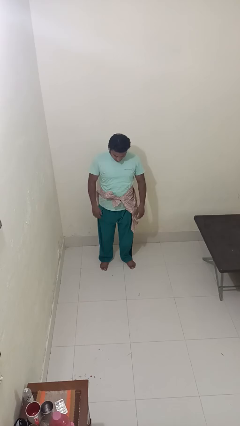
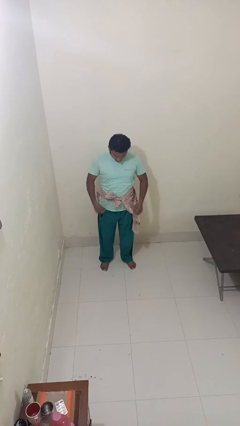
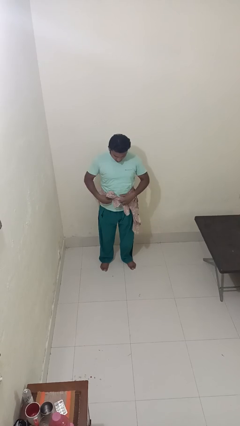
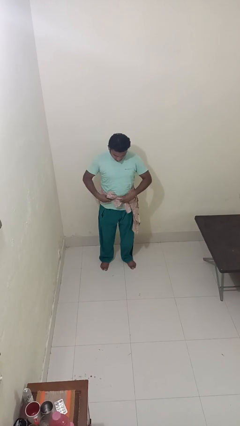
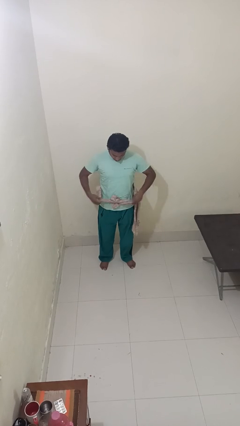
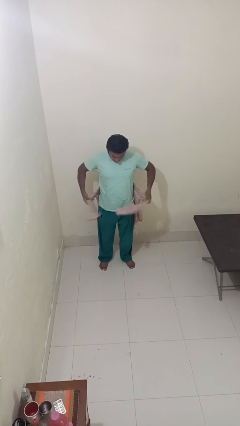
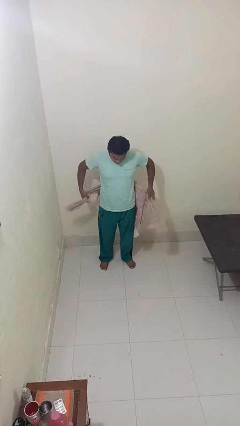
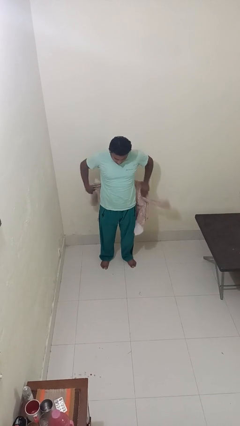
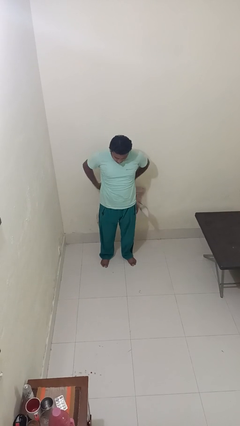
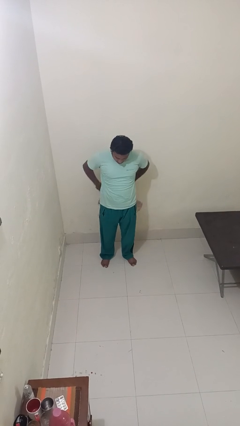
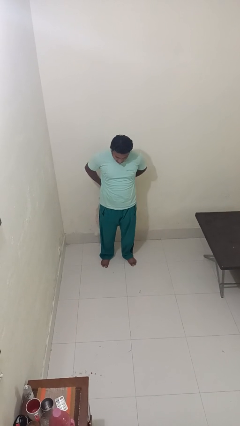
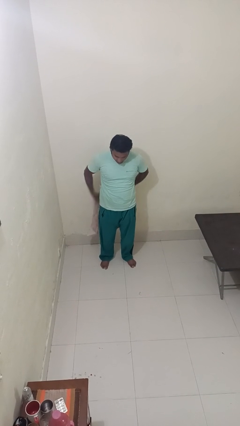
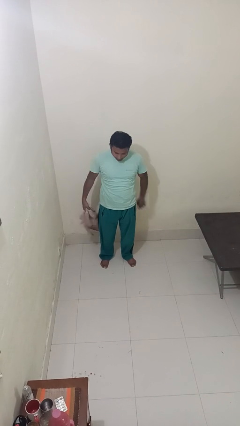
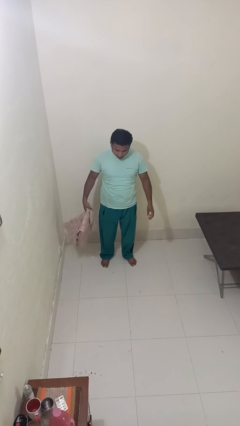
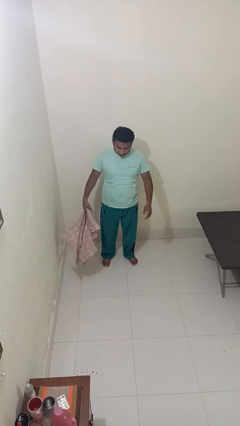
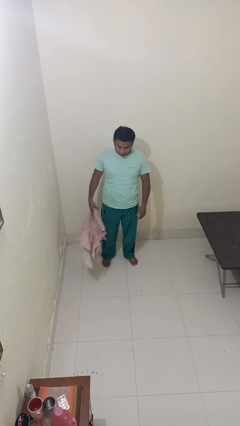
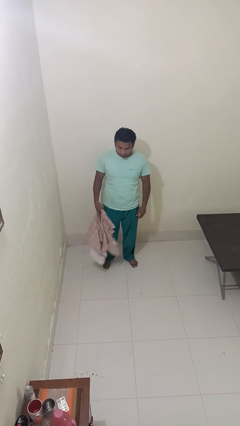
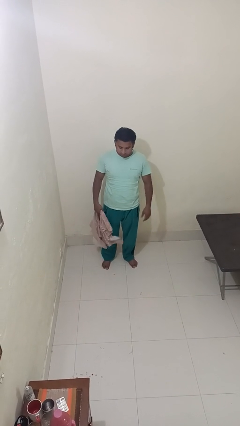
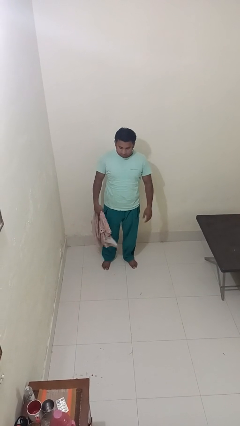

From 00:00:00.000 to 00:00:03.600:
person unties jacket around waist

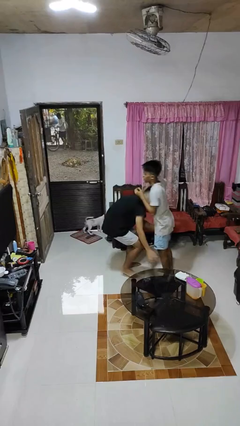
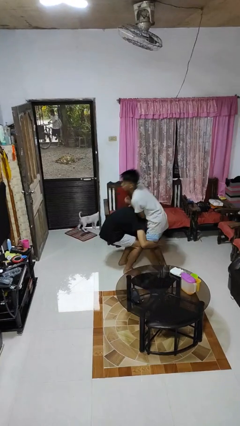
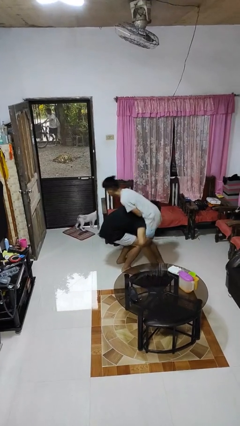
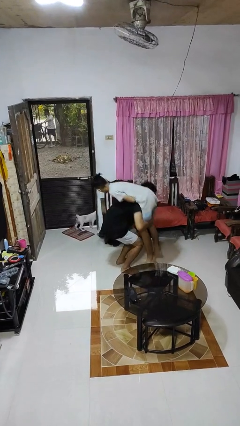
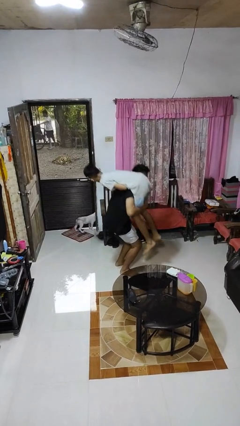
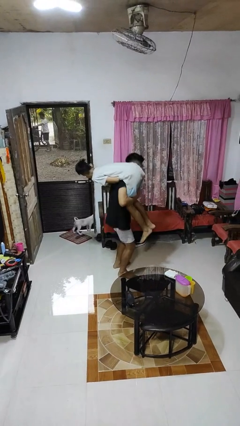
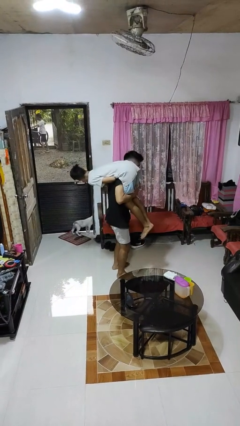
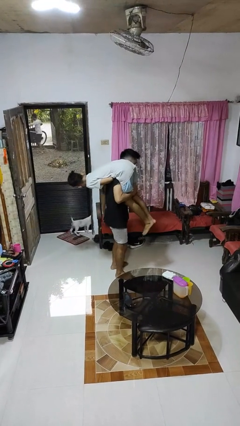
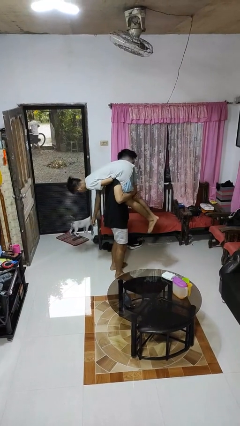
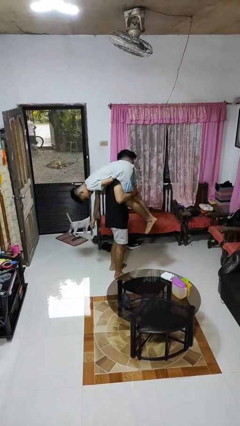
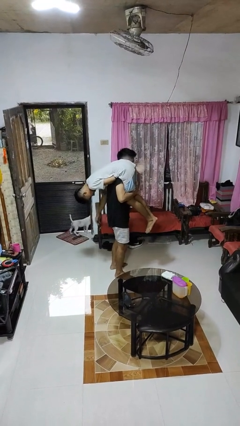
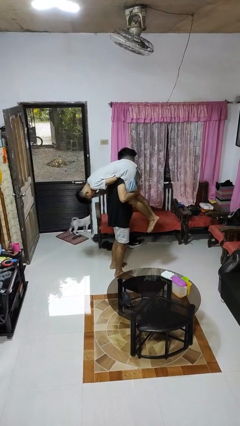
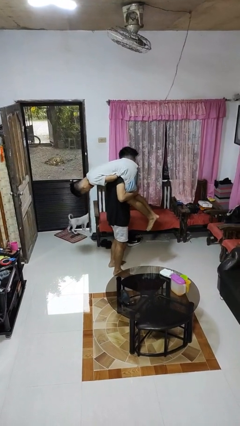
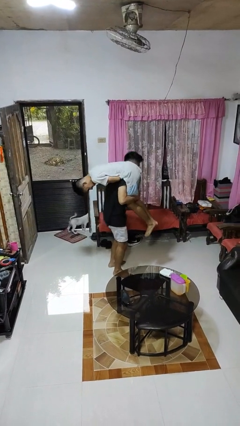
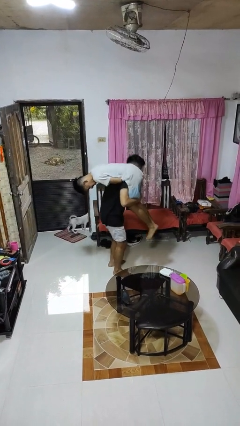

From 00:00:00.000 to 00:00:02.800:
person carries person over shoulder

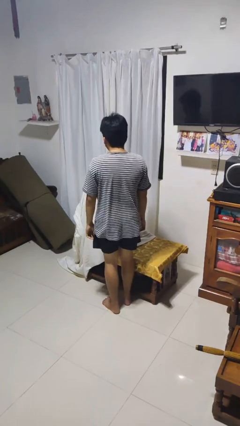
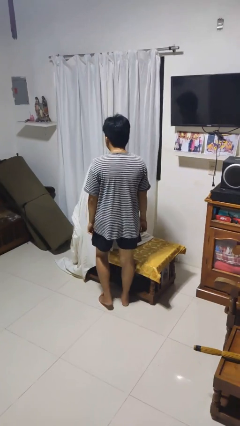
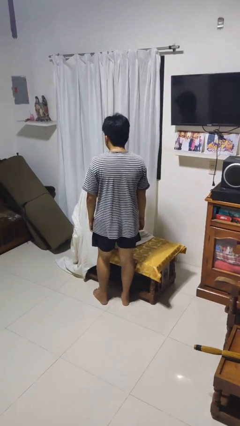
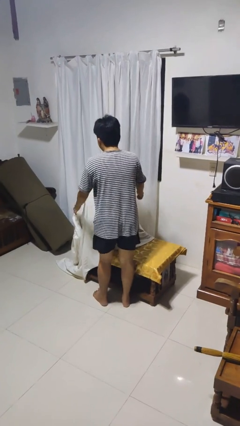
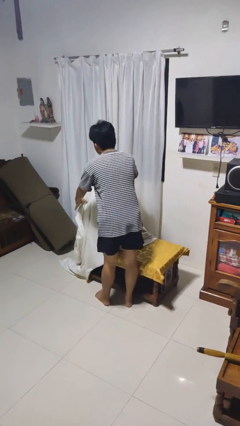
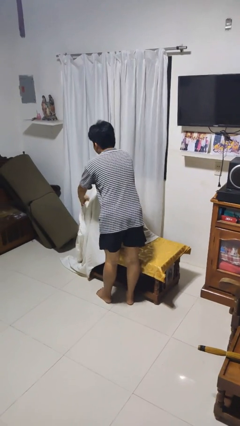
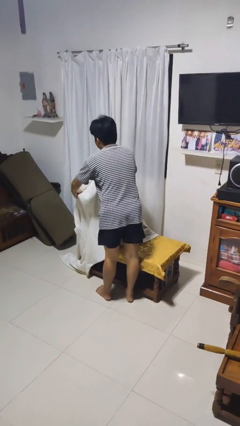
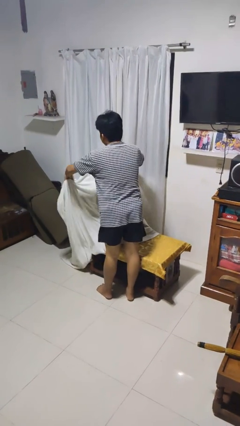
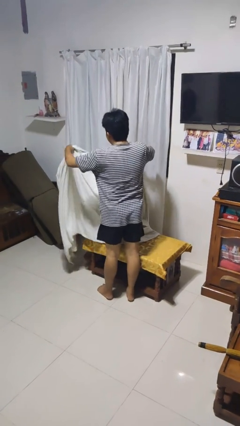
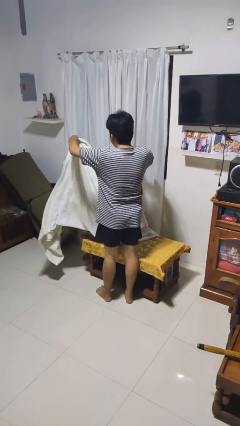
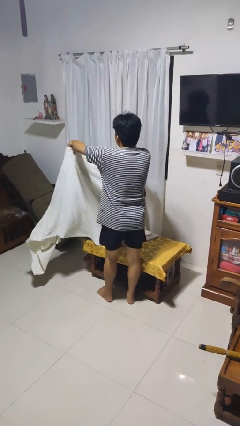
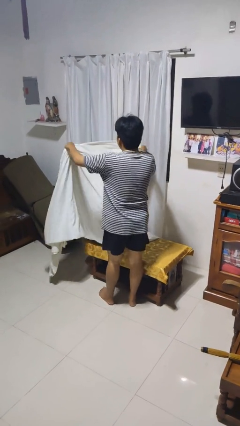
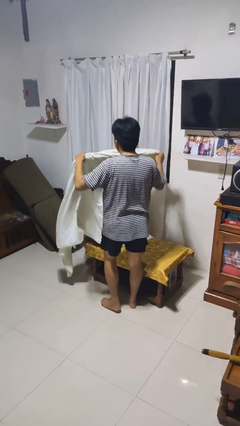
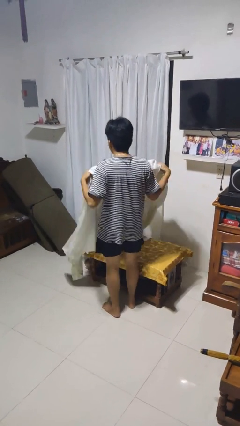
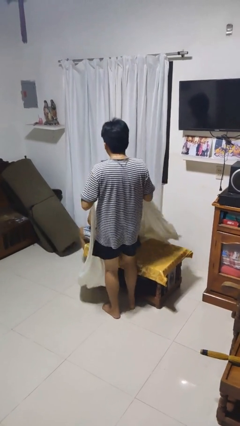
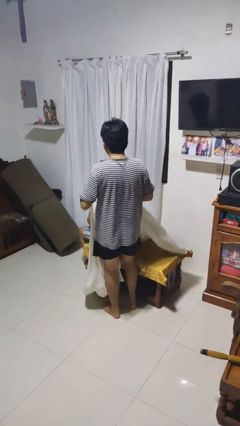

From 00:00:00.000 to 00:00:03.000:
person uncovers friend with blanket

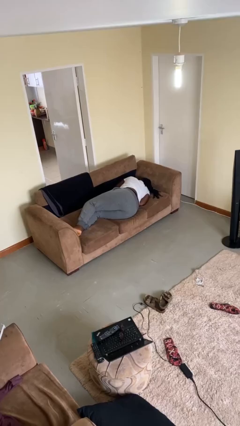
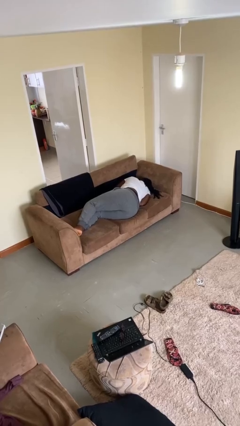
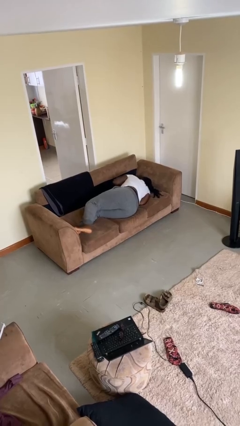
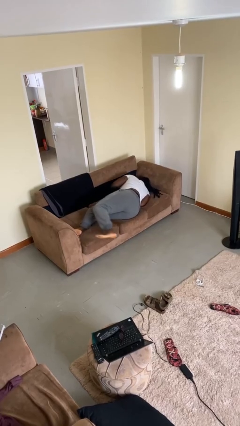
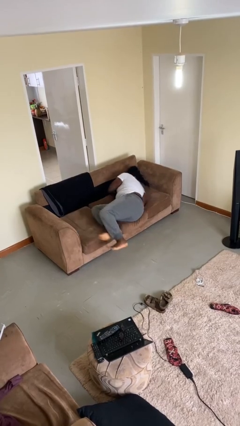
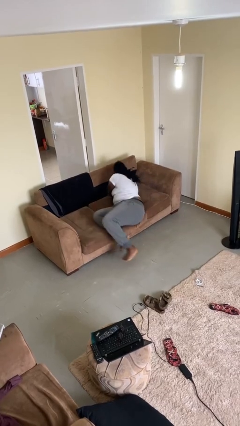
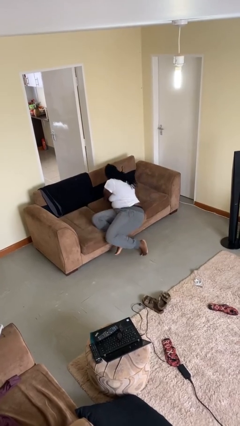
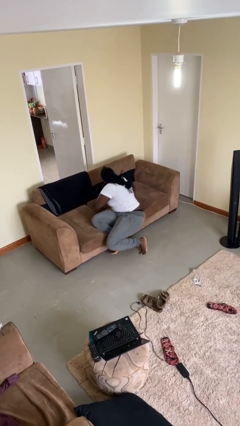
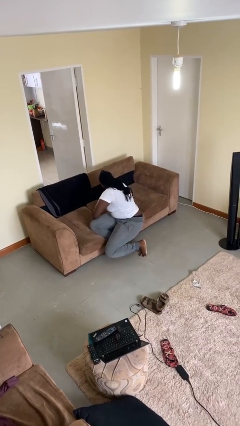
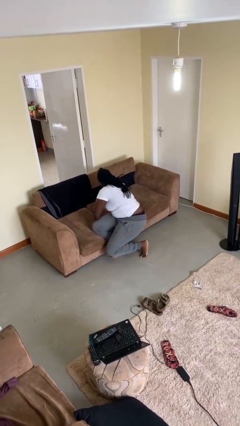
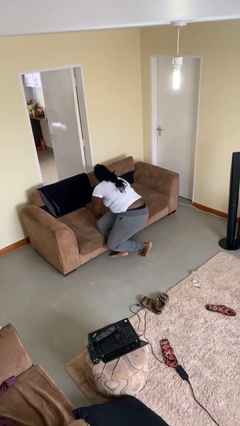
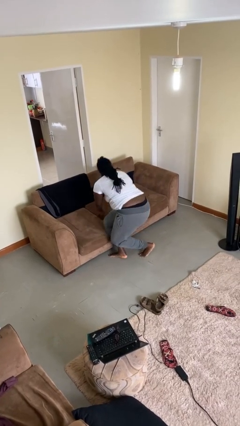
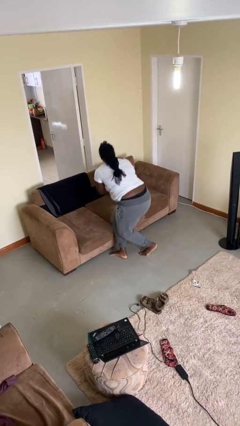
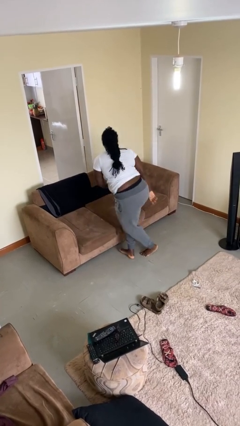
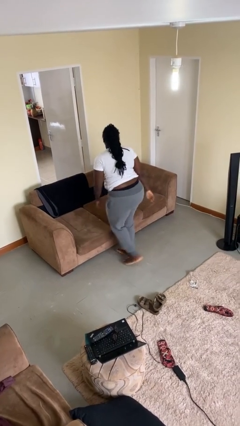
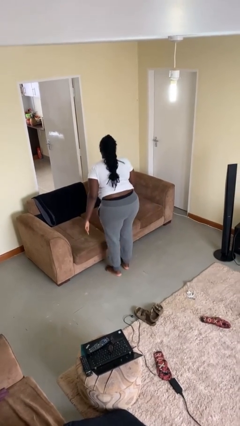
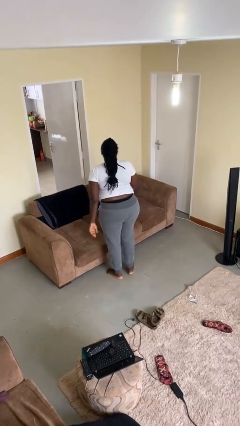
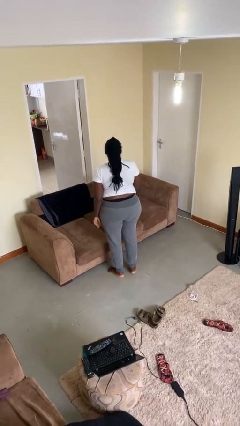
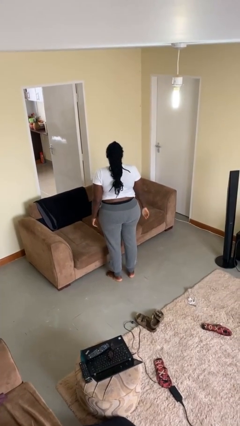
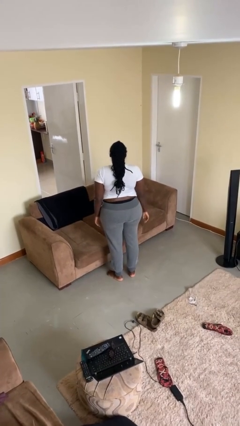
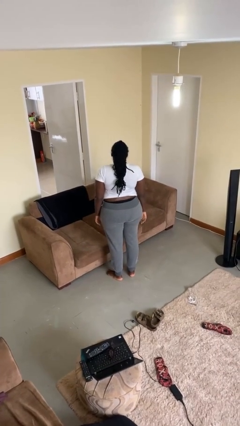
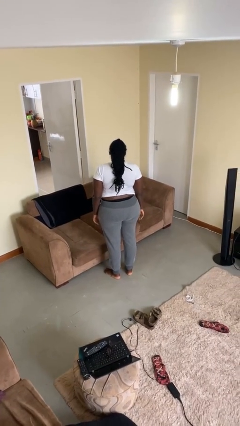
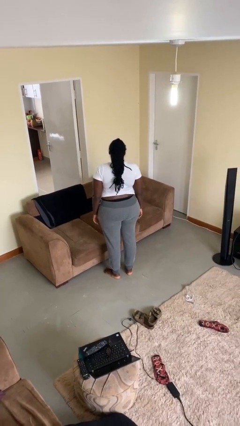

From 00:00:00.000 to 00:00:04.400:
person stands up

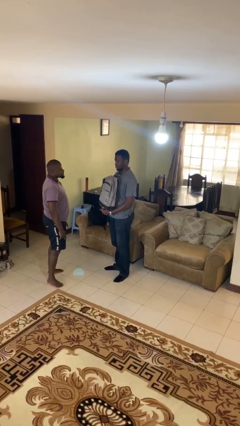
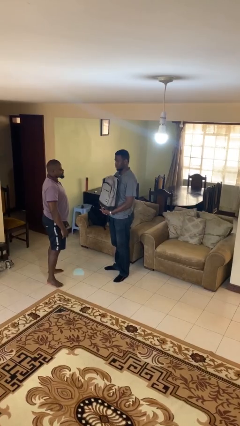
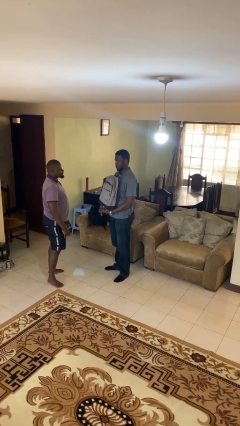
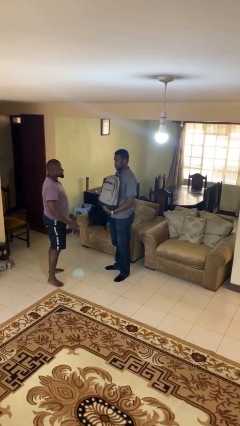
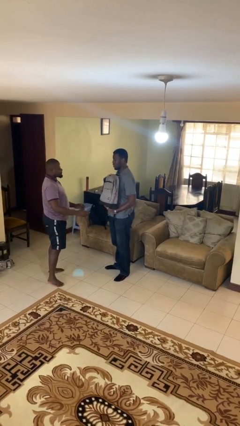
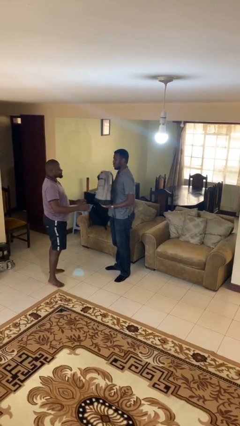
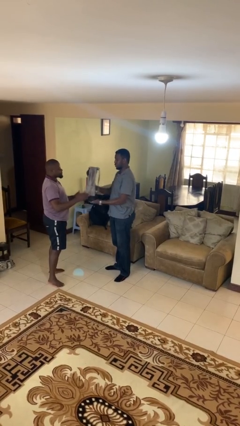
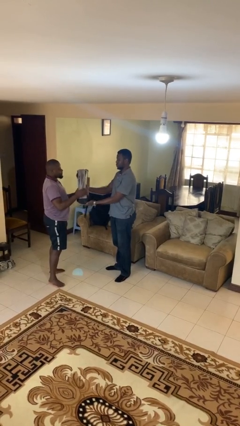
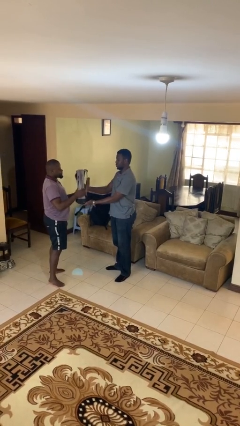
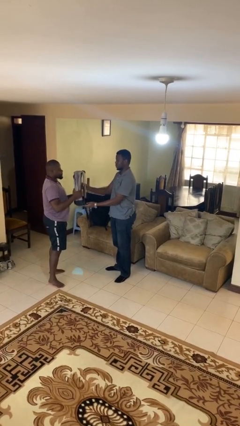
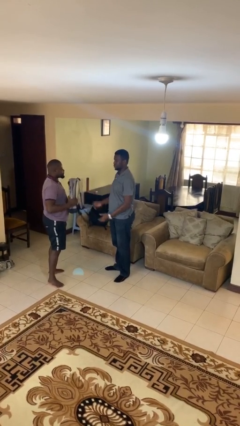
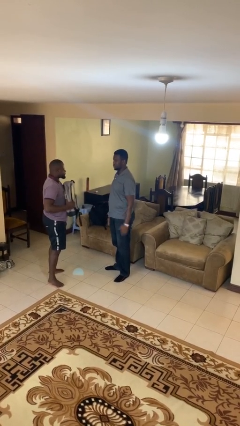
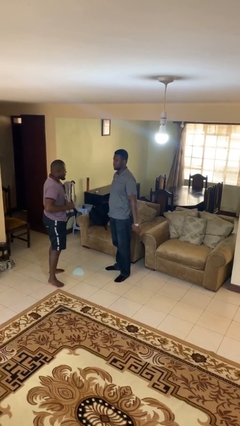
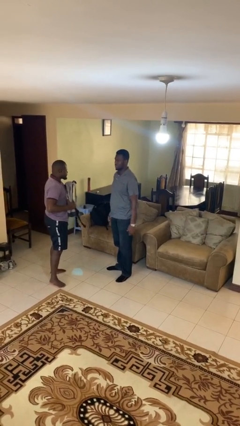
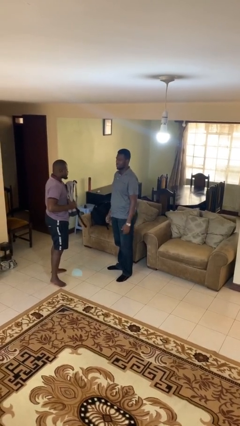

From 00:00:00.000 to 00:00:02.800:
person transfers object to person

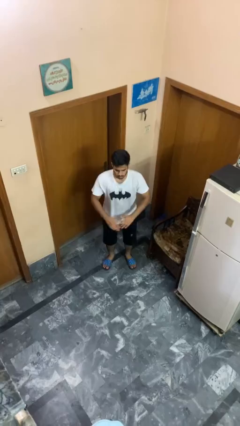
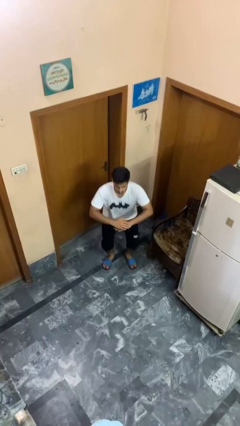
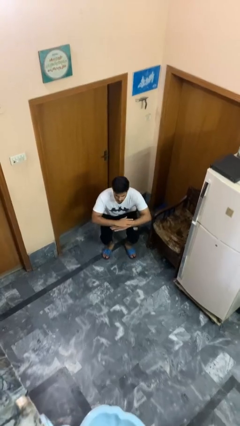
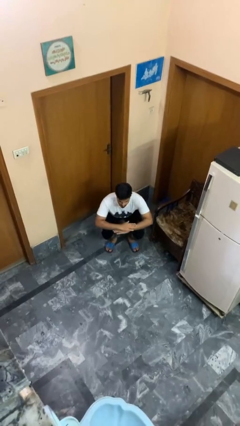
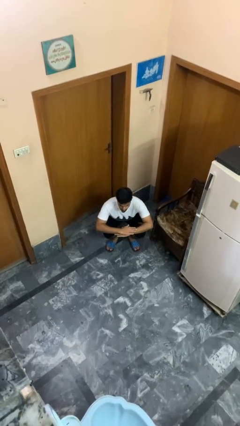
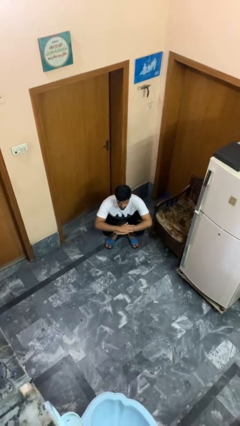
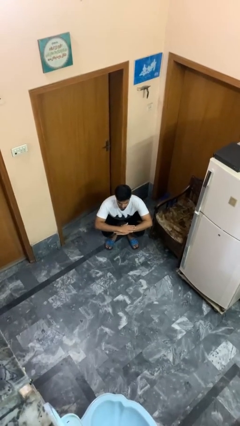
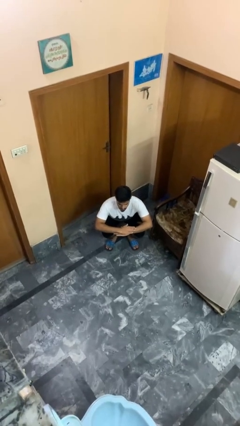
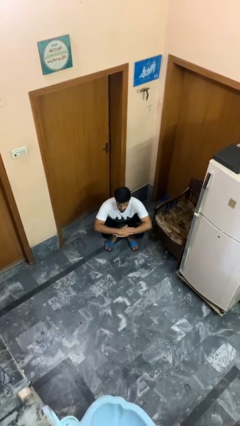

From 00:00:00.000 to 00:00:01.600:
person squats
